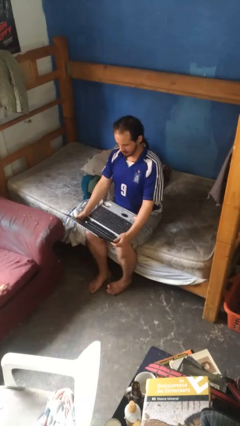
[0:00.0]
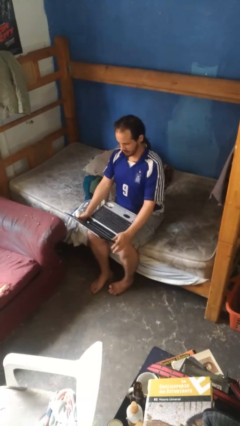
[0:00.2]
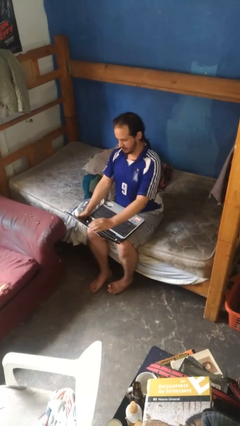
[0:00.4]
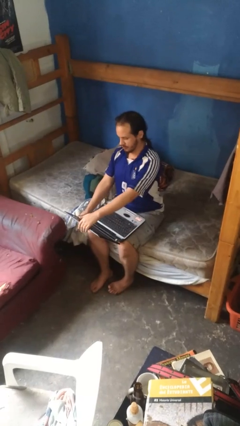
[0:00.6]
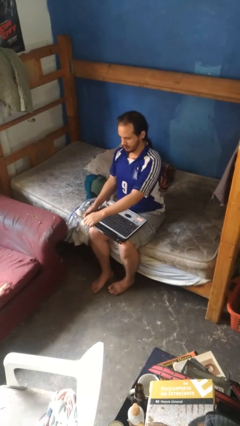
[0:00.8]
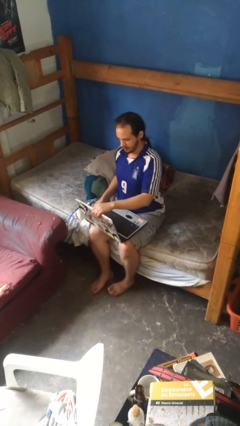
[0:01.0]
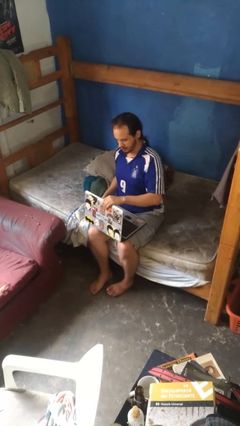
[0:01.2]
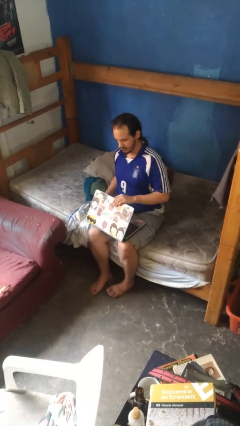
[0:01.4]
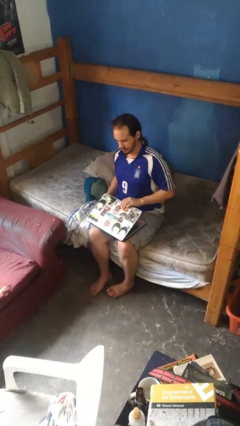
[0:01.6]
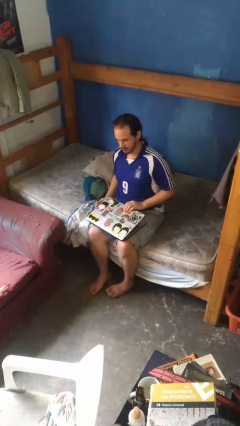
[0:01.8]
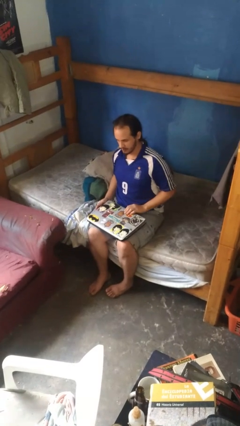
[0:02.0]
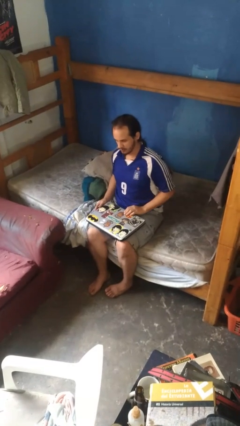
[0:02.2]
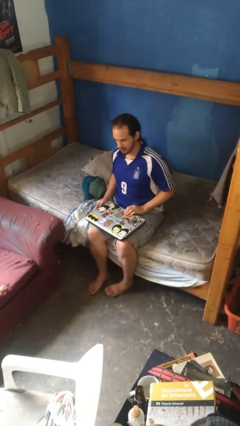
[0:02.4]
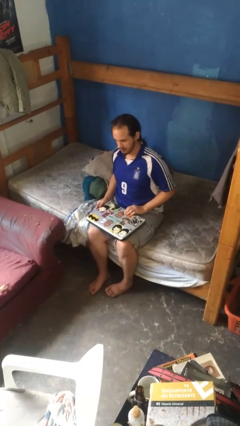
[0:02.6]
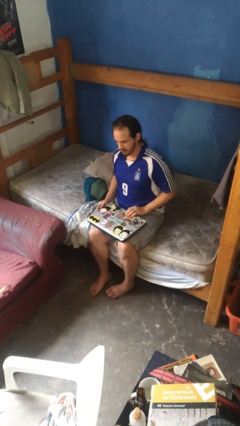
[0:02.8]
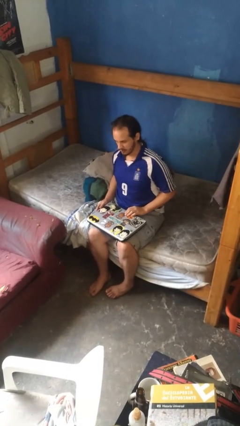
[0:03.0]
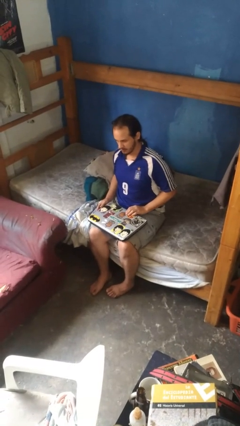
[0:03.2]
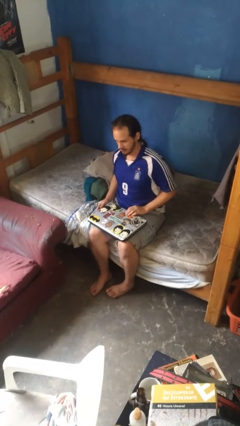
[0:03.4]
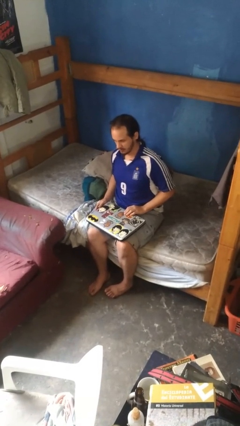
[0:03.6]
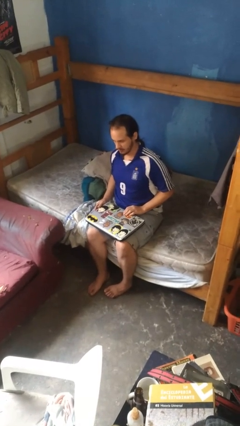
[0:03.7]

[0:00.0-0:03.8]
person closes laptop

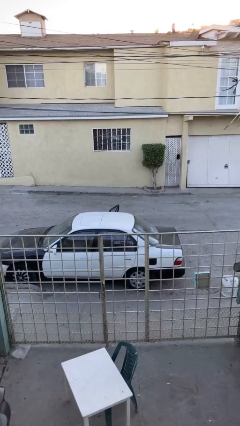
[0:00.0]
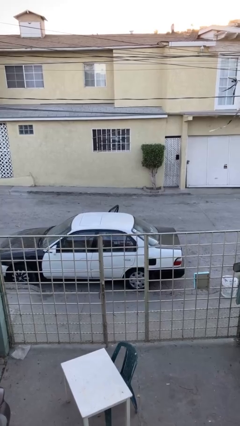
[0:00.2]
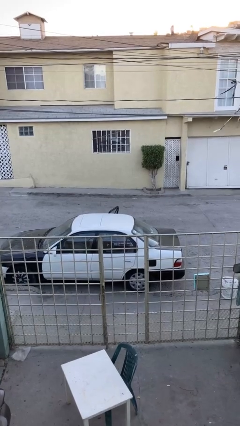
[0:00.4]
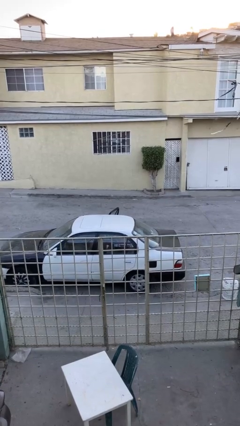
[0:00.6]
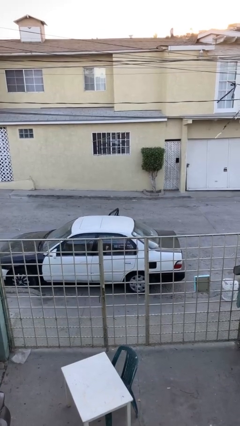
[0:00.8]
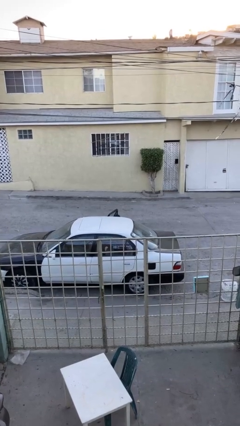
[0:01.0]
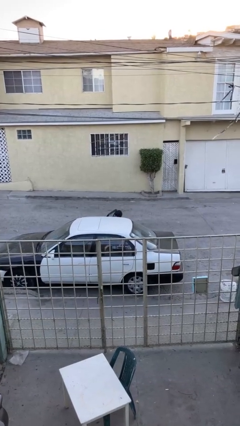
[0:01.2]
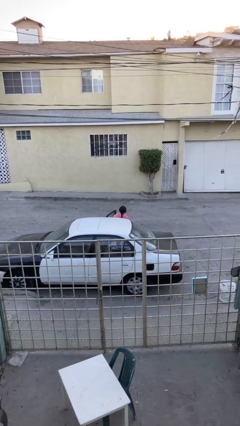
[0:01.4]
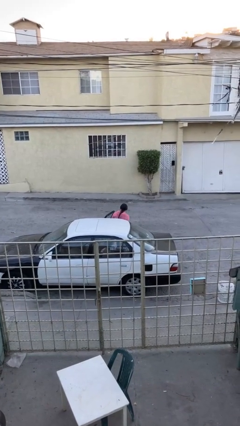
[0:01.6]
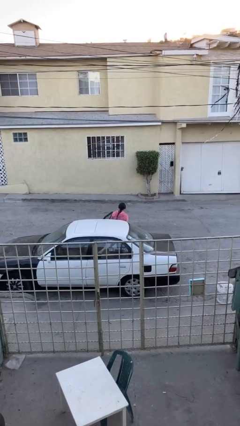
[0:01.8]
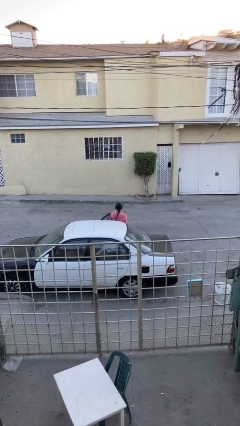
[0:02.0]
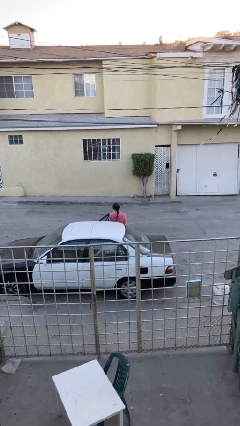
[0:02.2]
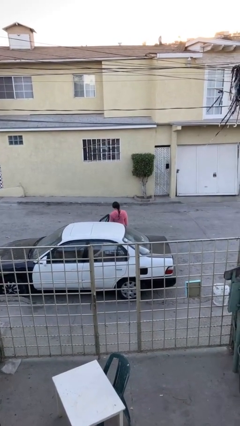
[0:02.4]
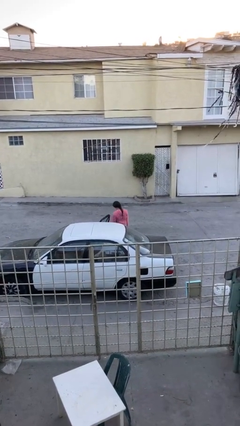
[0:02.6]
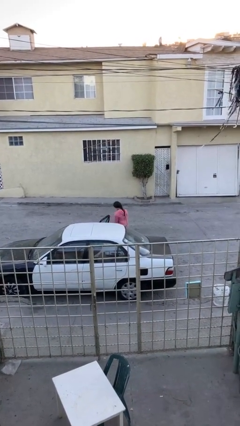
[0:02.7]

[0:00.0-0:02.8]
person exits car

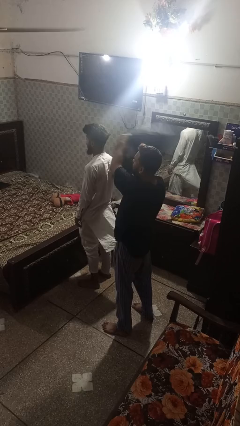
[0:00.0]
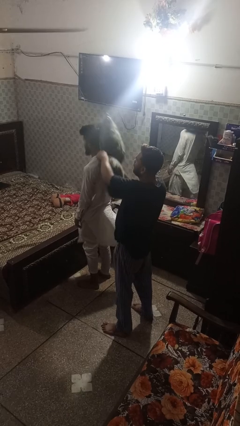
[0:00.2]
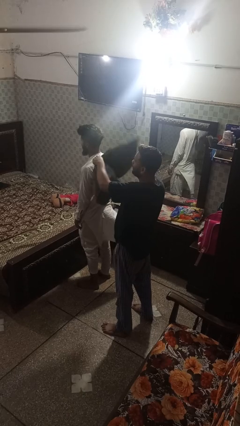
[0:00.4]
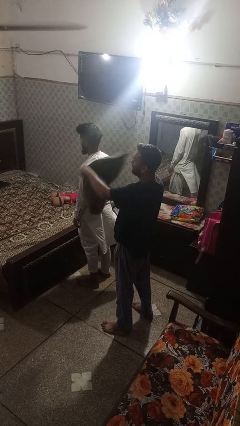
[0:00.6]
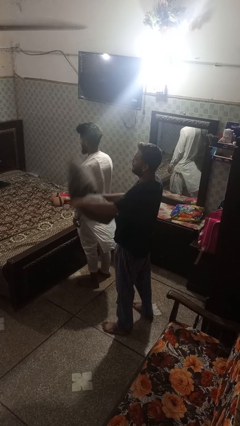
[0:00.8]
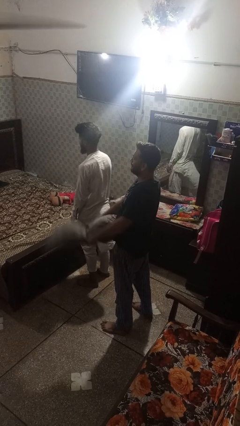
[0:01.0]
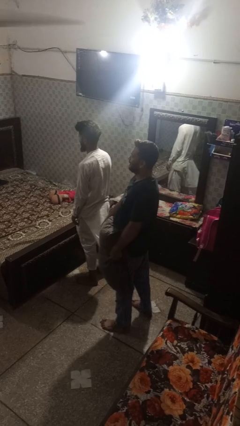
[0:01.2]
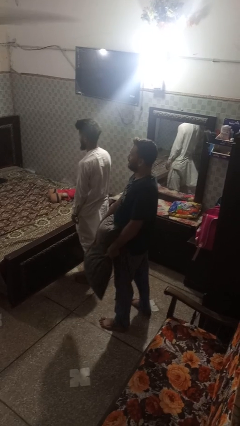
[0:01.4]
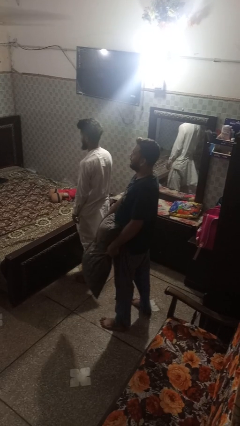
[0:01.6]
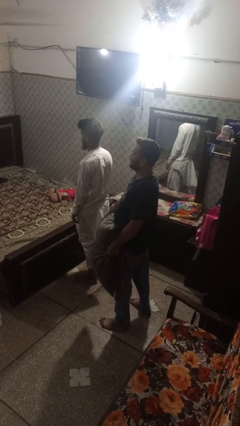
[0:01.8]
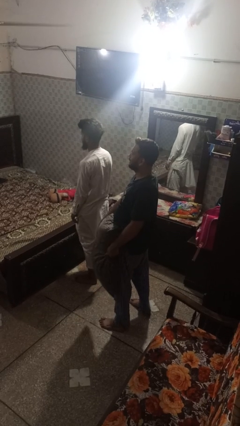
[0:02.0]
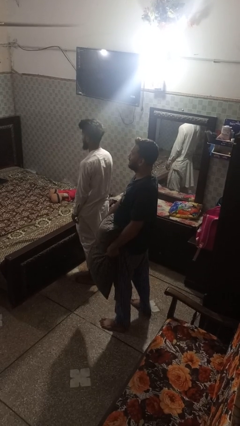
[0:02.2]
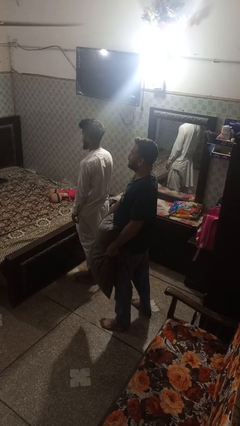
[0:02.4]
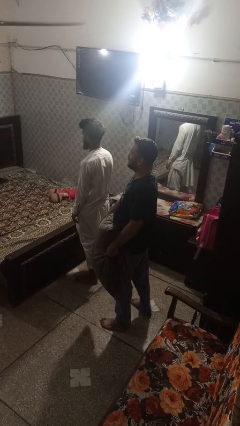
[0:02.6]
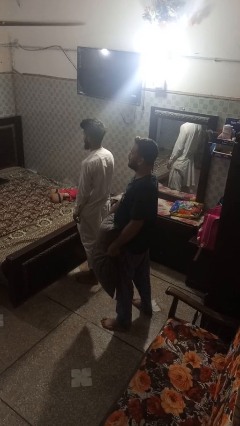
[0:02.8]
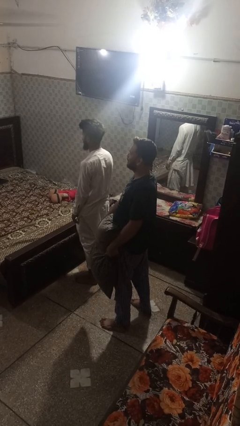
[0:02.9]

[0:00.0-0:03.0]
person hits person with pillow

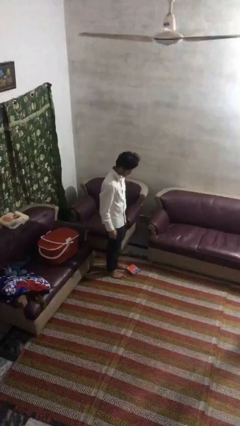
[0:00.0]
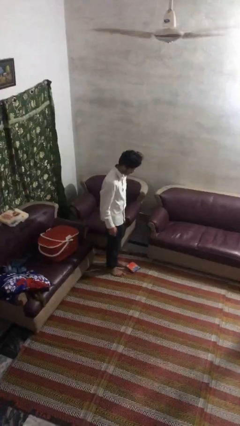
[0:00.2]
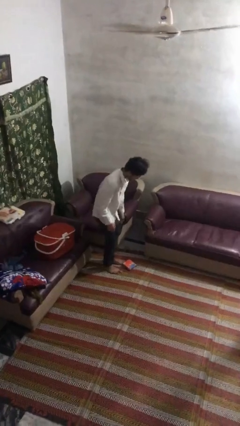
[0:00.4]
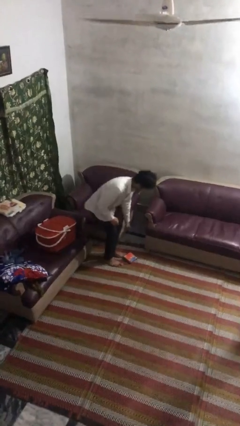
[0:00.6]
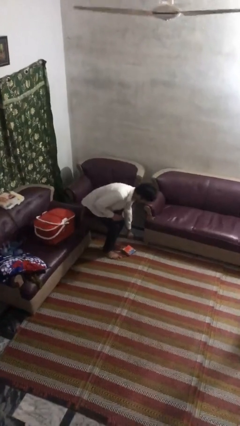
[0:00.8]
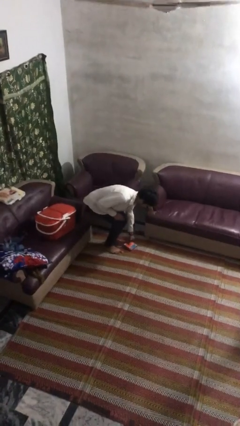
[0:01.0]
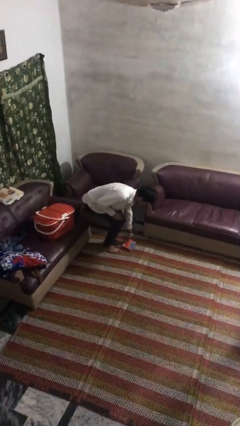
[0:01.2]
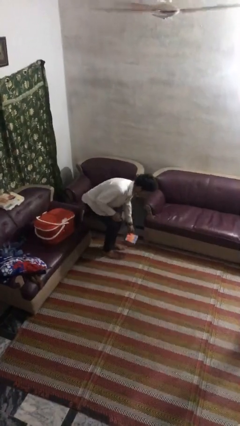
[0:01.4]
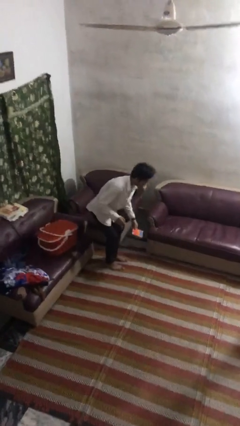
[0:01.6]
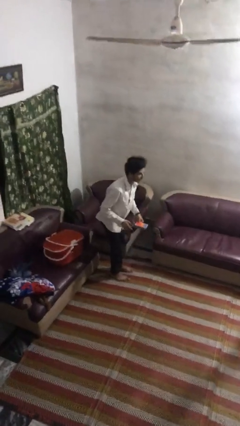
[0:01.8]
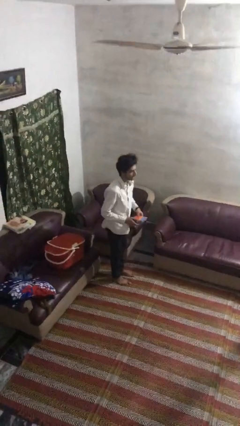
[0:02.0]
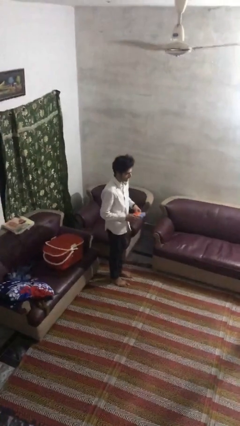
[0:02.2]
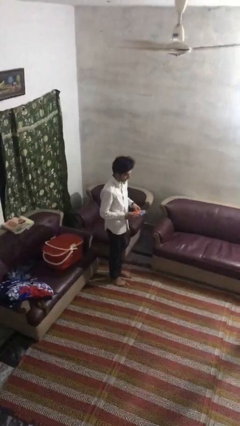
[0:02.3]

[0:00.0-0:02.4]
person picks up object from floor

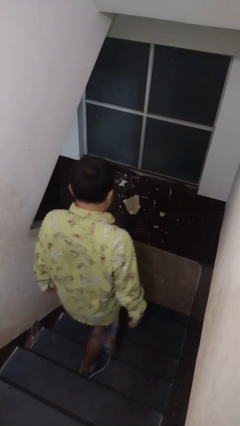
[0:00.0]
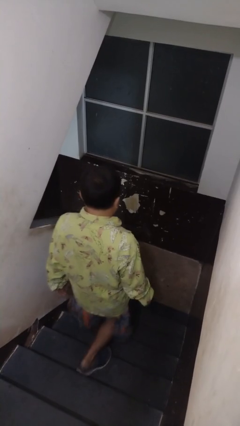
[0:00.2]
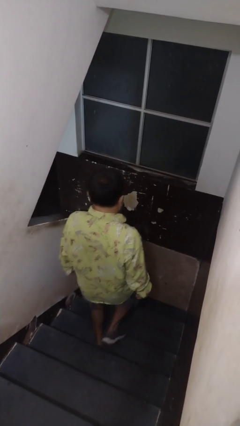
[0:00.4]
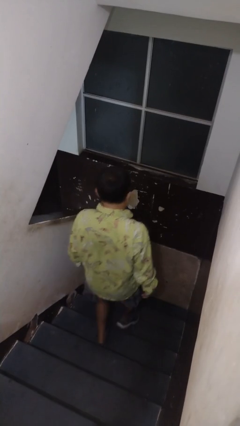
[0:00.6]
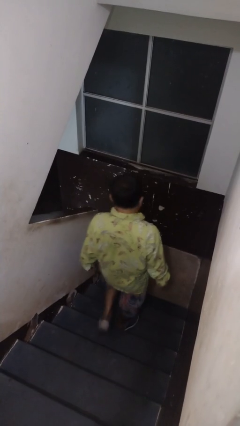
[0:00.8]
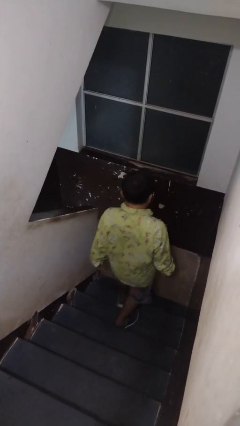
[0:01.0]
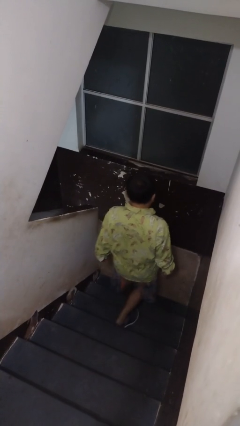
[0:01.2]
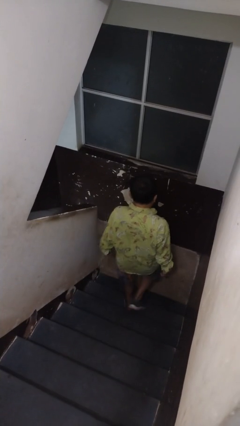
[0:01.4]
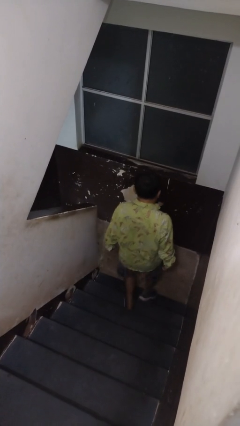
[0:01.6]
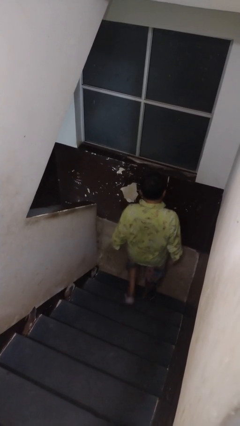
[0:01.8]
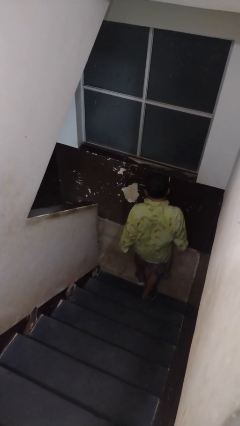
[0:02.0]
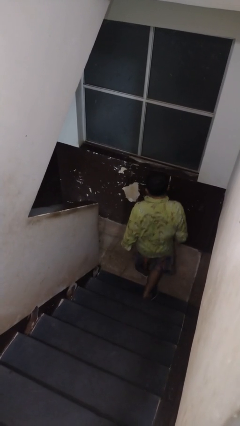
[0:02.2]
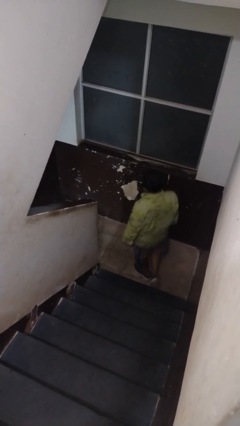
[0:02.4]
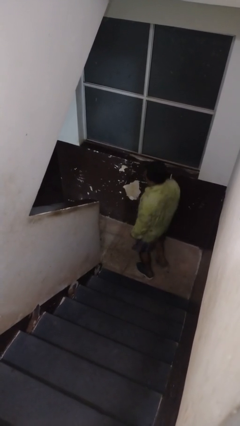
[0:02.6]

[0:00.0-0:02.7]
person climbs down stairs

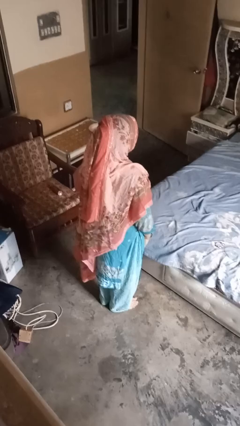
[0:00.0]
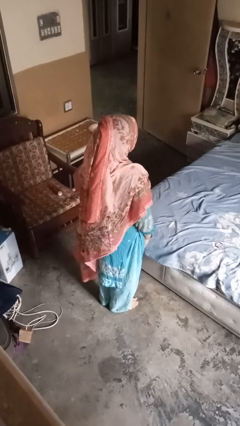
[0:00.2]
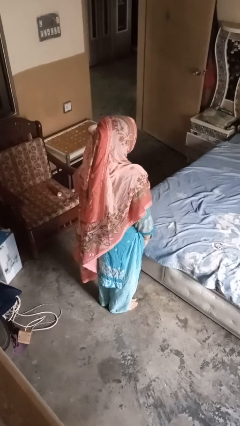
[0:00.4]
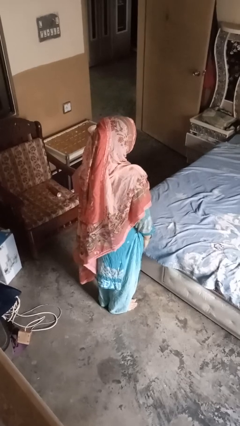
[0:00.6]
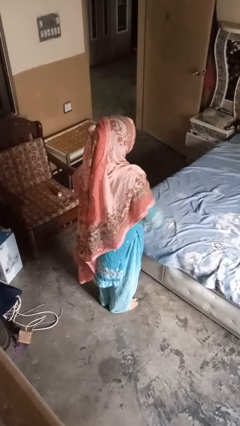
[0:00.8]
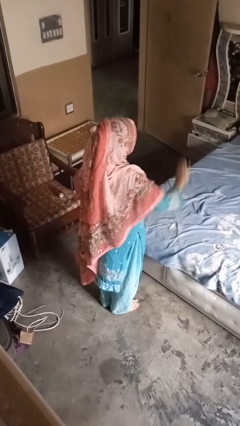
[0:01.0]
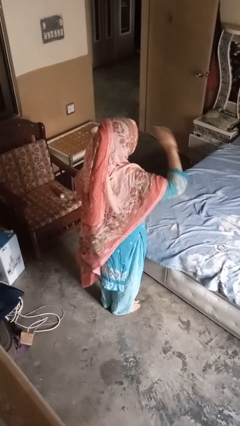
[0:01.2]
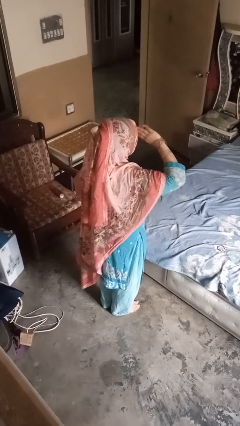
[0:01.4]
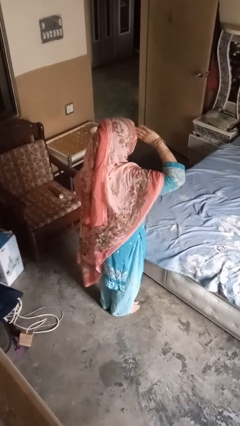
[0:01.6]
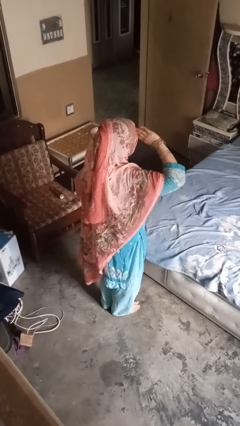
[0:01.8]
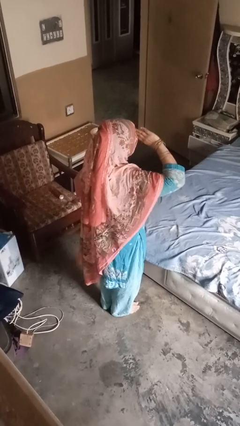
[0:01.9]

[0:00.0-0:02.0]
person salutes

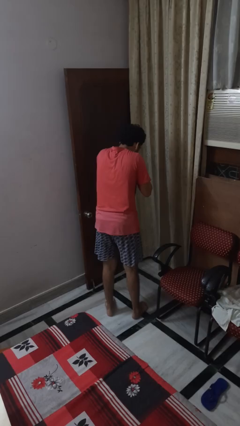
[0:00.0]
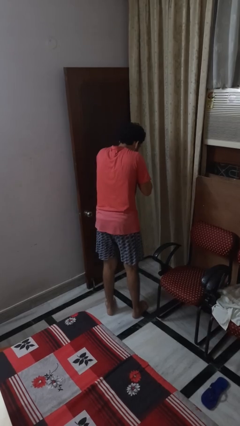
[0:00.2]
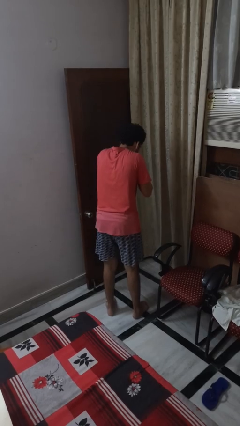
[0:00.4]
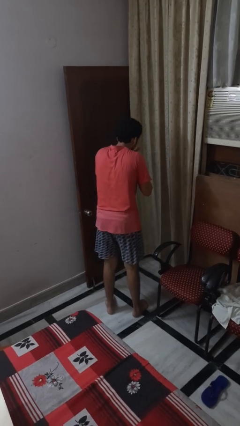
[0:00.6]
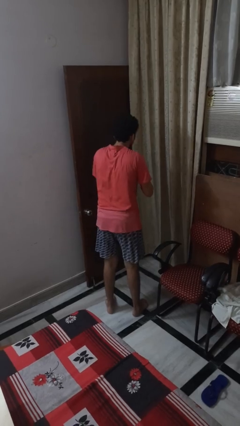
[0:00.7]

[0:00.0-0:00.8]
person sneezes into hand
